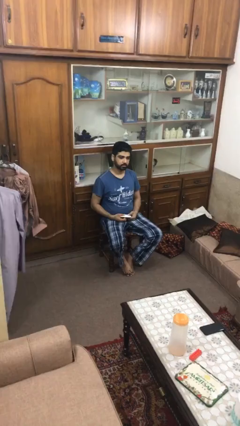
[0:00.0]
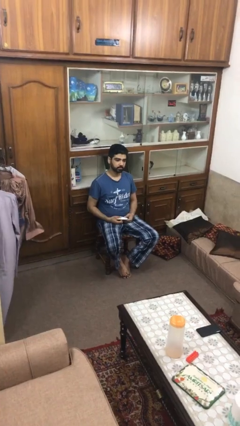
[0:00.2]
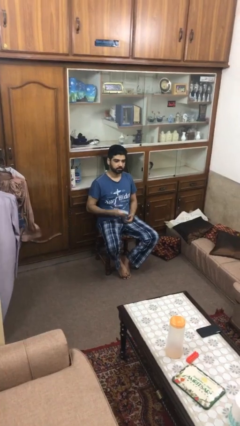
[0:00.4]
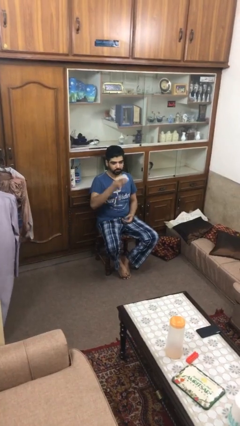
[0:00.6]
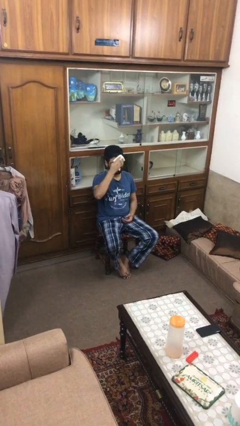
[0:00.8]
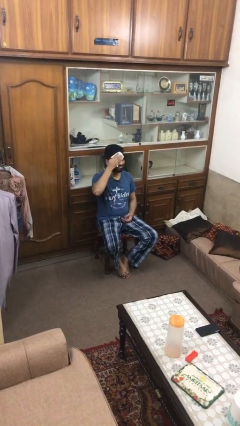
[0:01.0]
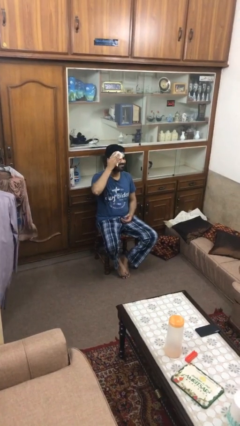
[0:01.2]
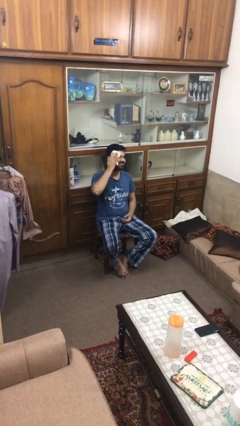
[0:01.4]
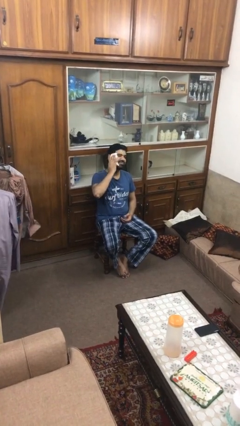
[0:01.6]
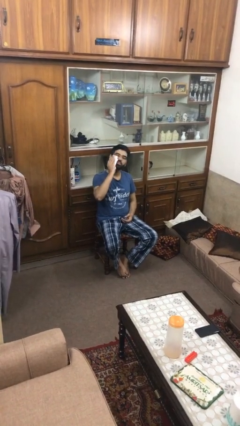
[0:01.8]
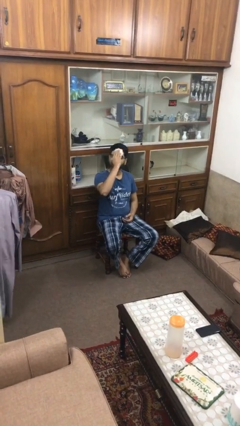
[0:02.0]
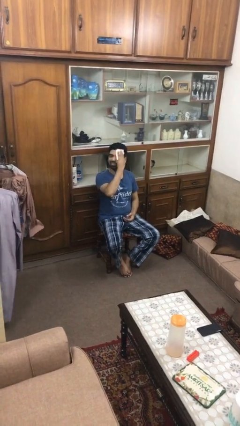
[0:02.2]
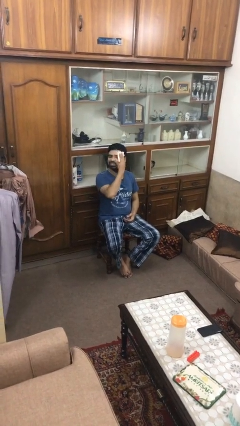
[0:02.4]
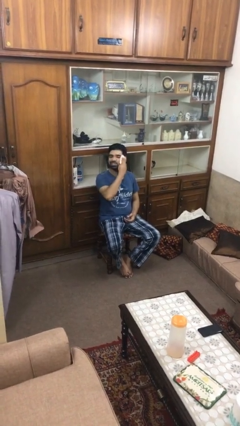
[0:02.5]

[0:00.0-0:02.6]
person wipes mouth with napkin

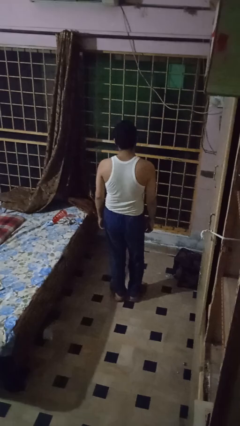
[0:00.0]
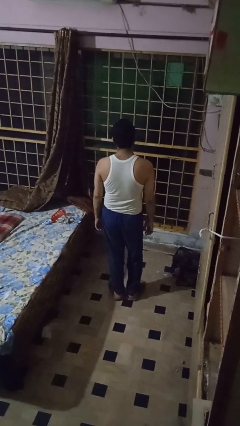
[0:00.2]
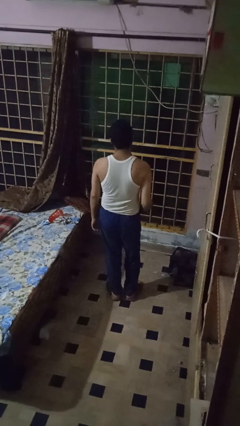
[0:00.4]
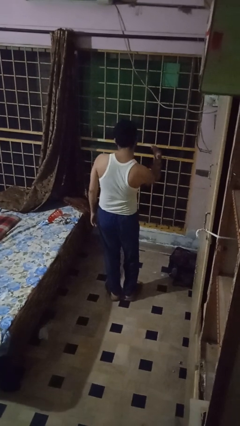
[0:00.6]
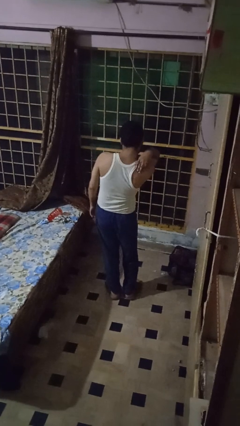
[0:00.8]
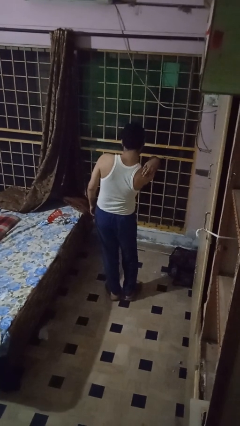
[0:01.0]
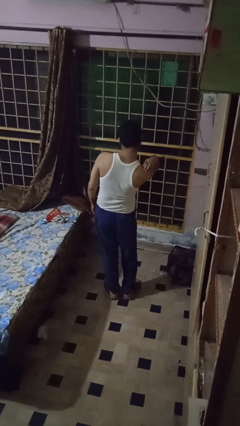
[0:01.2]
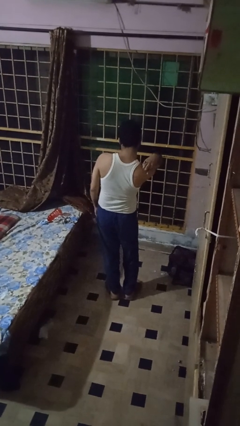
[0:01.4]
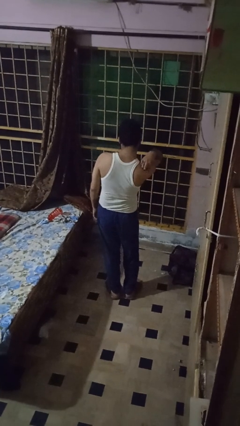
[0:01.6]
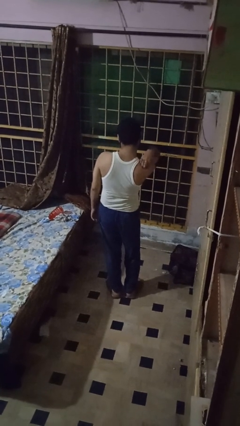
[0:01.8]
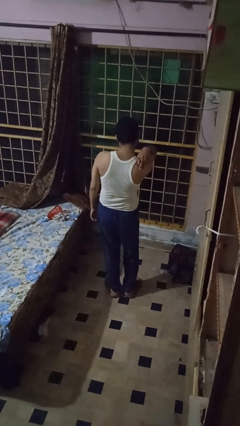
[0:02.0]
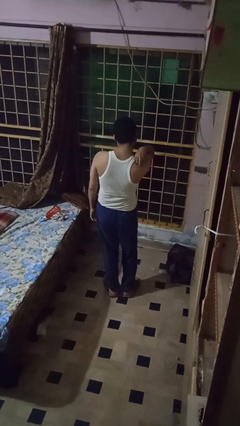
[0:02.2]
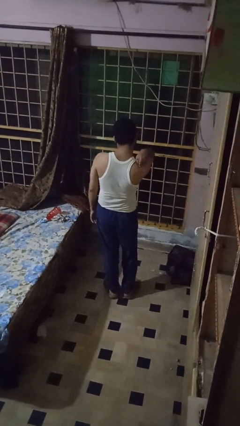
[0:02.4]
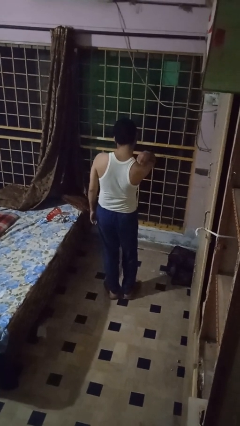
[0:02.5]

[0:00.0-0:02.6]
person swats bug

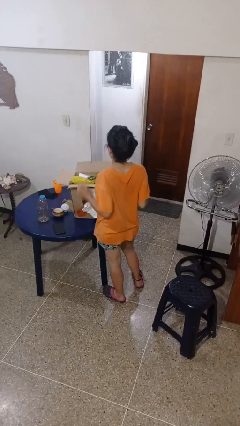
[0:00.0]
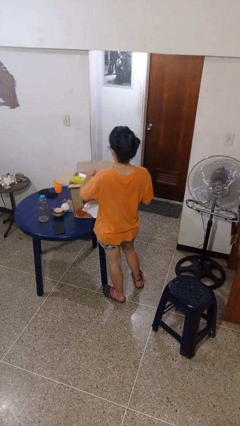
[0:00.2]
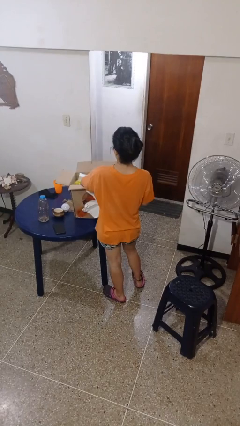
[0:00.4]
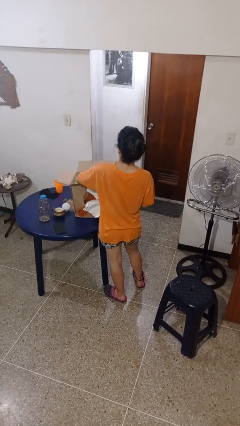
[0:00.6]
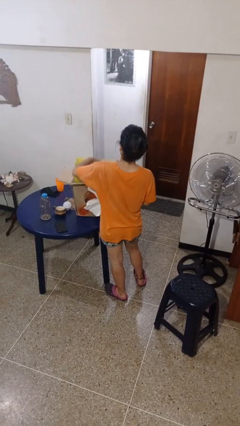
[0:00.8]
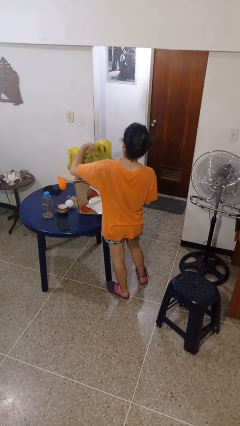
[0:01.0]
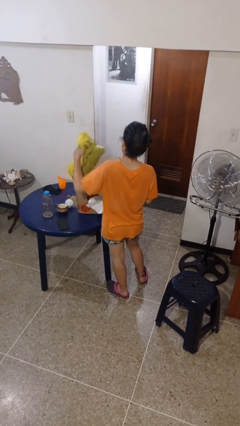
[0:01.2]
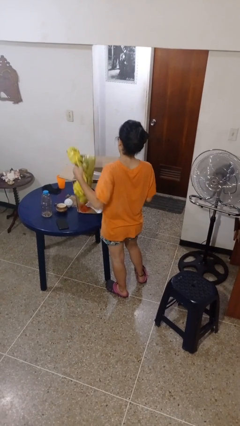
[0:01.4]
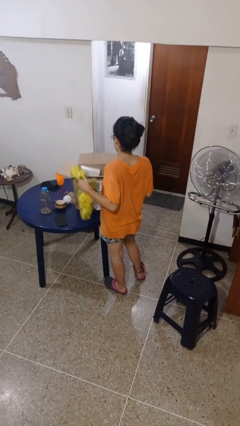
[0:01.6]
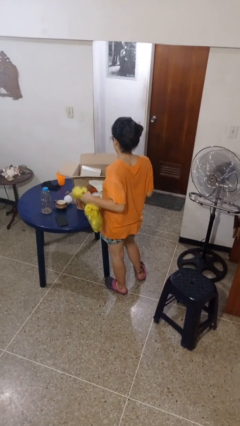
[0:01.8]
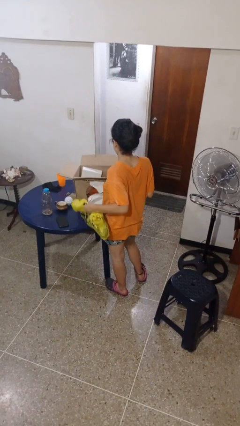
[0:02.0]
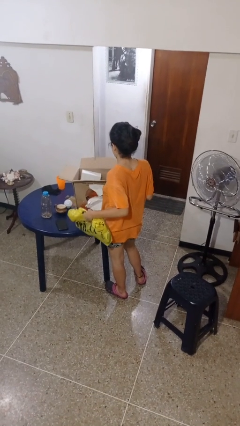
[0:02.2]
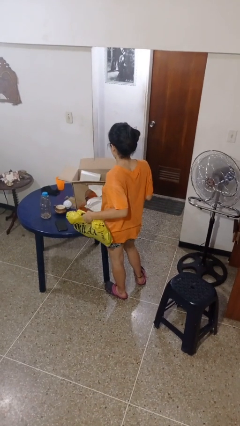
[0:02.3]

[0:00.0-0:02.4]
person takes object from box

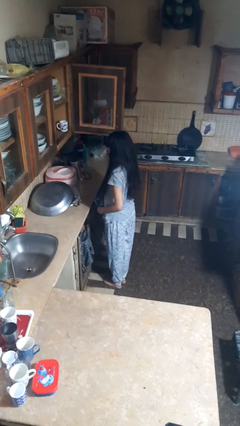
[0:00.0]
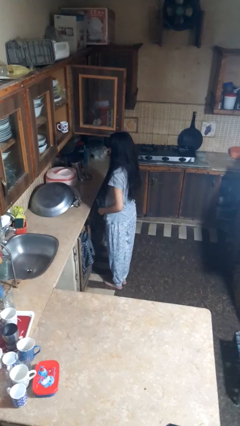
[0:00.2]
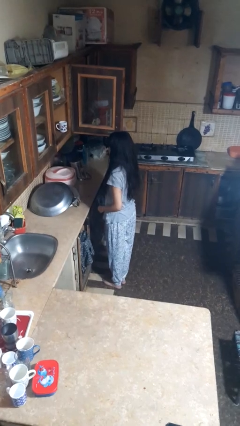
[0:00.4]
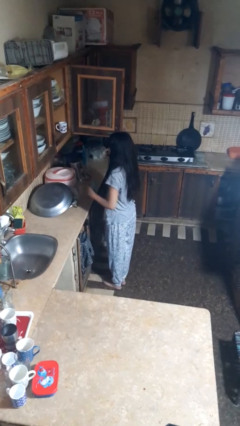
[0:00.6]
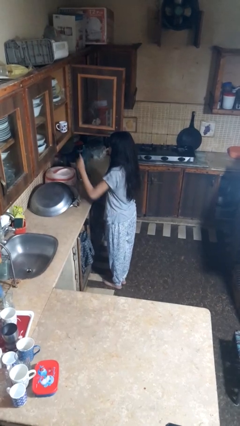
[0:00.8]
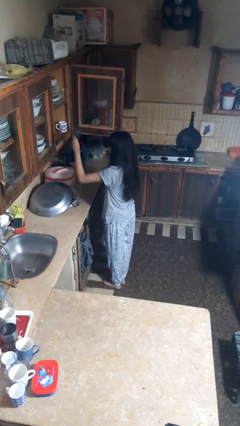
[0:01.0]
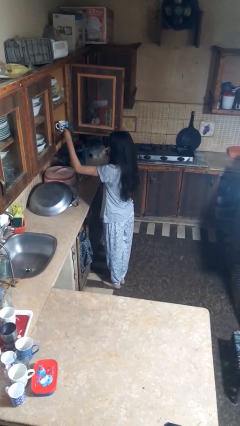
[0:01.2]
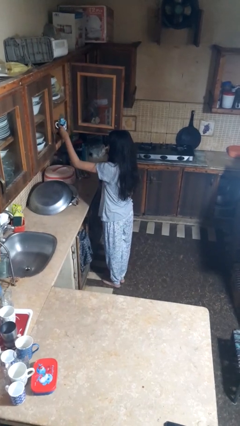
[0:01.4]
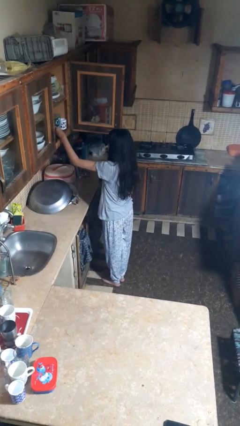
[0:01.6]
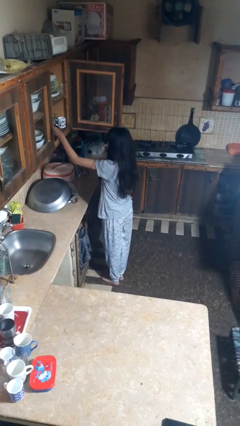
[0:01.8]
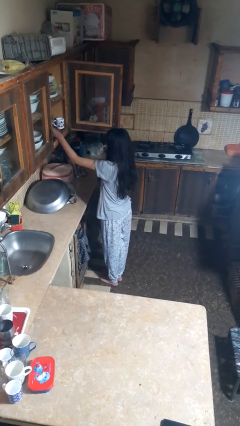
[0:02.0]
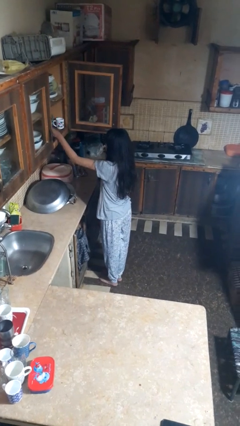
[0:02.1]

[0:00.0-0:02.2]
person puts object in cabinet

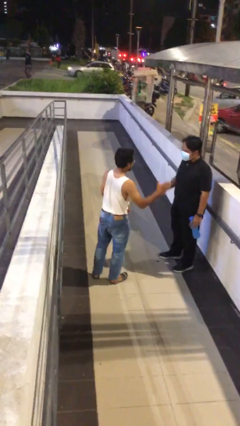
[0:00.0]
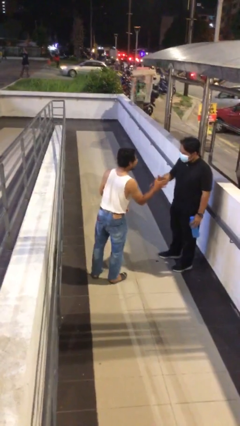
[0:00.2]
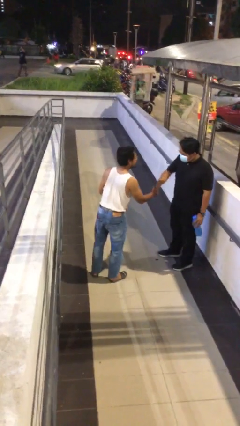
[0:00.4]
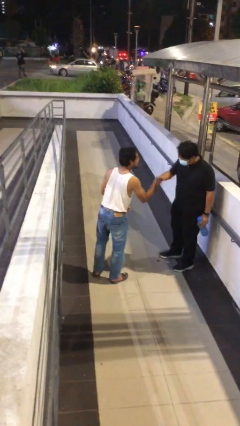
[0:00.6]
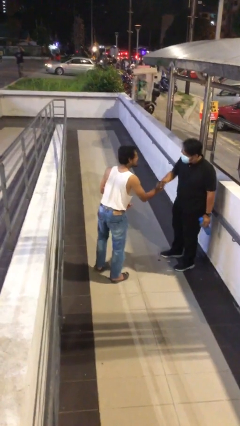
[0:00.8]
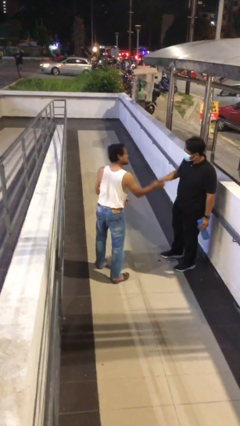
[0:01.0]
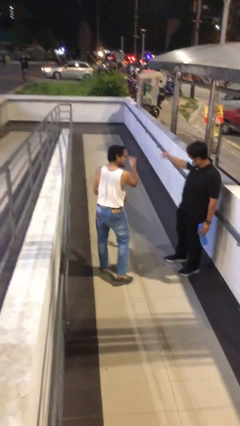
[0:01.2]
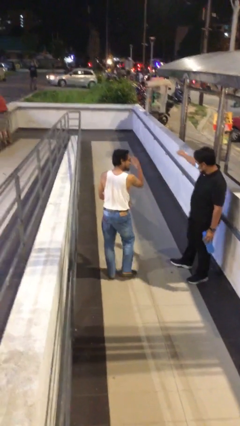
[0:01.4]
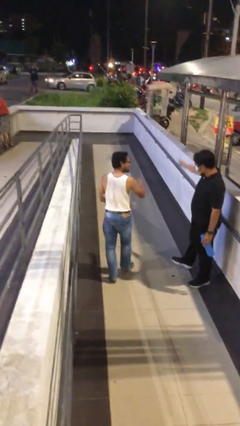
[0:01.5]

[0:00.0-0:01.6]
person shakes hand

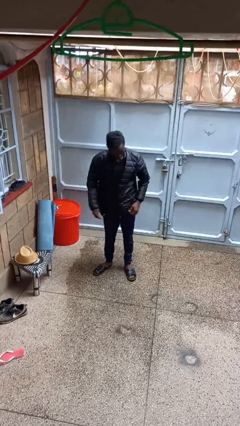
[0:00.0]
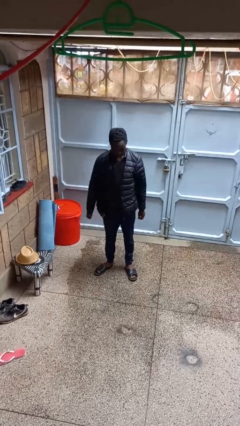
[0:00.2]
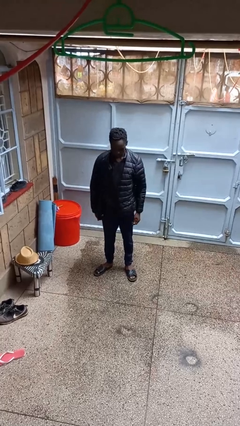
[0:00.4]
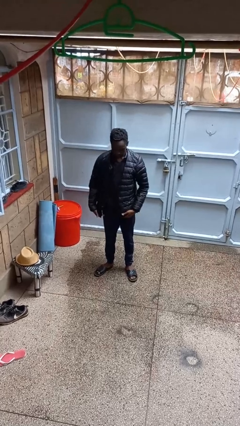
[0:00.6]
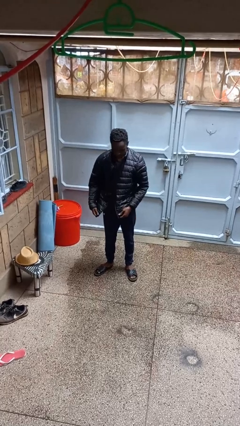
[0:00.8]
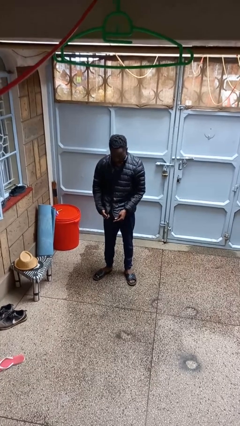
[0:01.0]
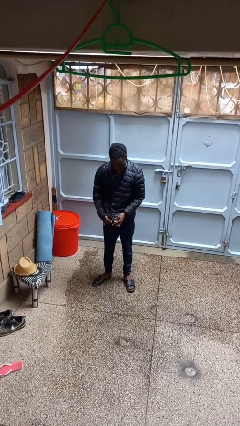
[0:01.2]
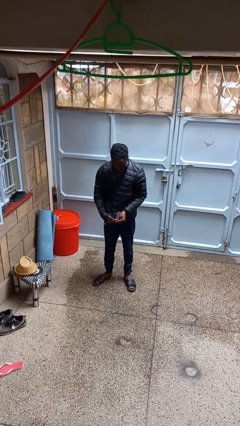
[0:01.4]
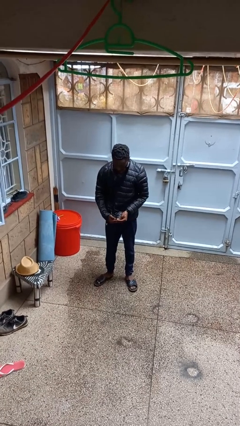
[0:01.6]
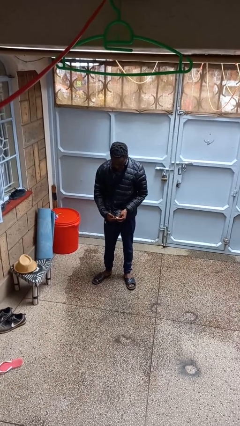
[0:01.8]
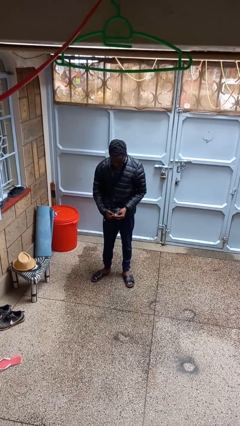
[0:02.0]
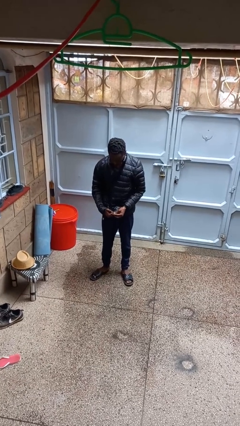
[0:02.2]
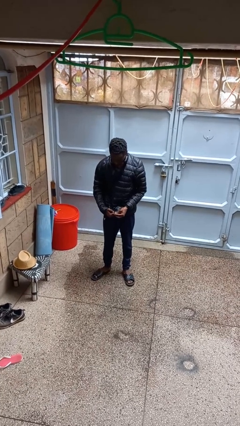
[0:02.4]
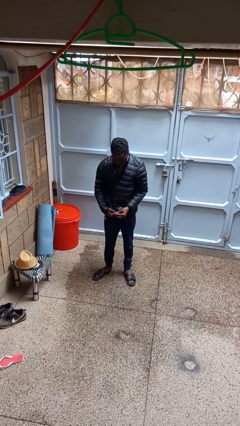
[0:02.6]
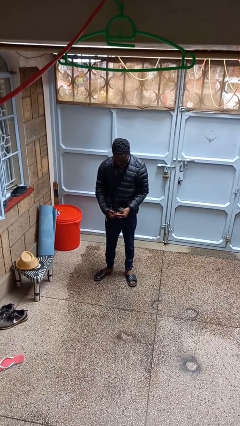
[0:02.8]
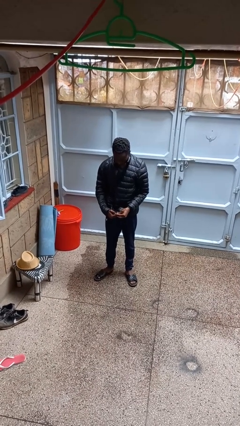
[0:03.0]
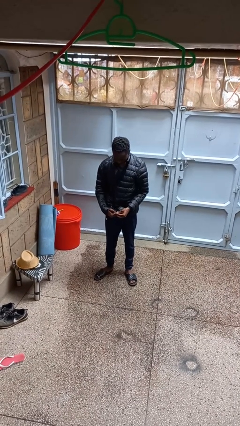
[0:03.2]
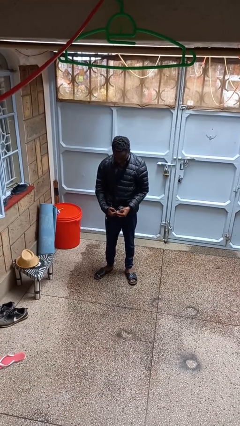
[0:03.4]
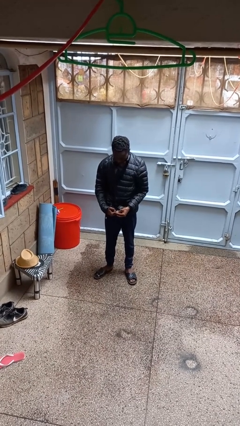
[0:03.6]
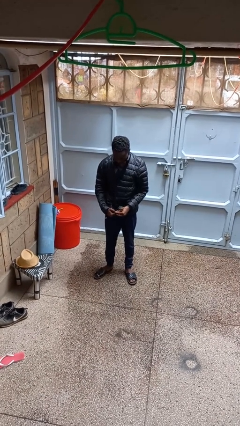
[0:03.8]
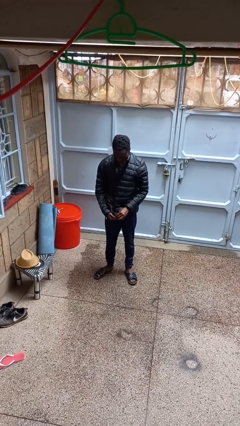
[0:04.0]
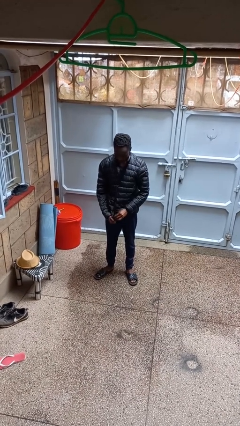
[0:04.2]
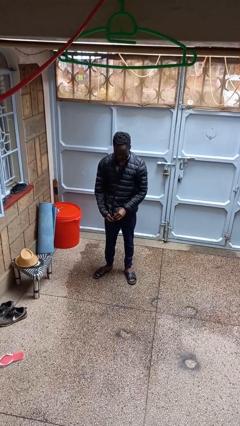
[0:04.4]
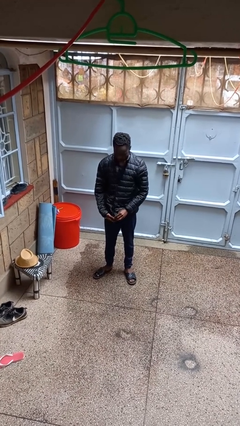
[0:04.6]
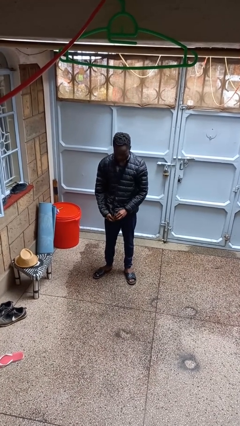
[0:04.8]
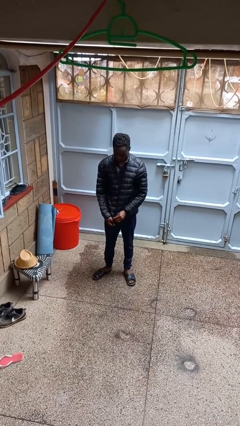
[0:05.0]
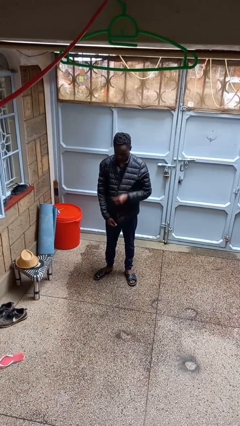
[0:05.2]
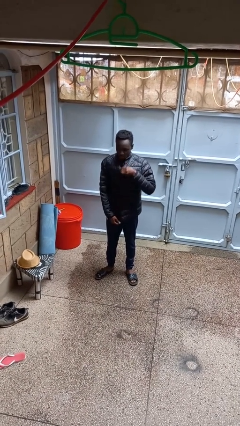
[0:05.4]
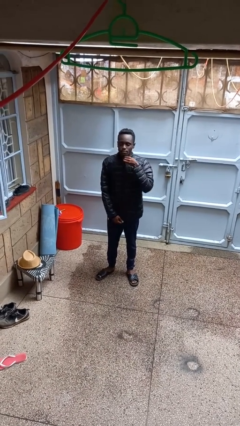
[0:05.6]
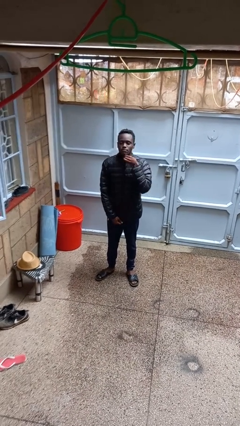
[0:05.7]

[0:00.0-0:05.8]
person zips up jacket
